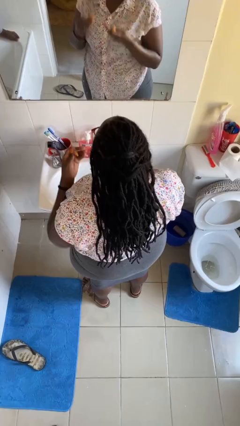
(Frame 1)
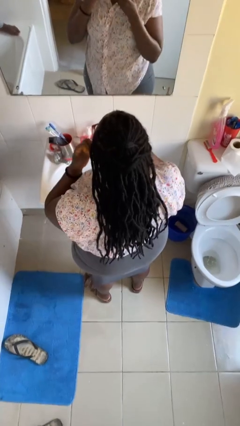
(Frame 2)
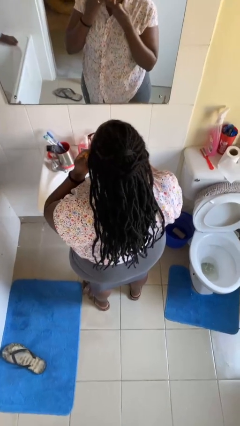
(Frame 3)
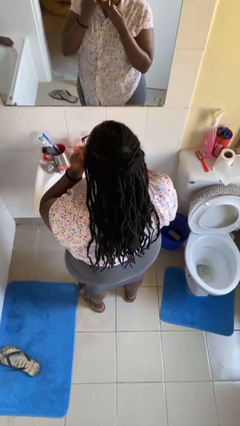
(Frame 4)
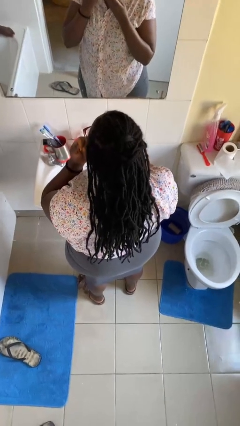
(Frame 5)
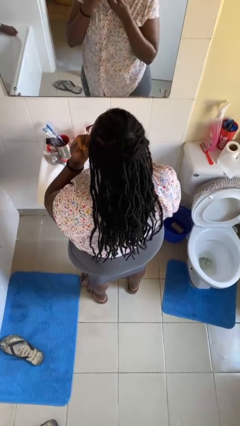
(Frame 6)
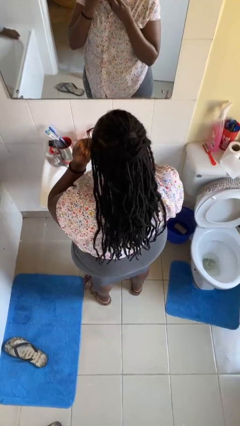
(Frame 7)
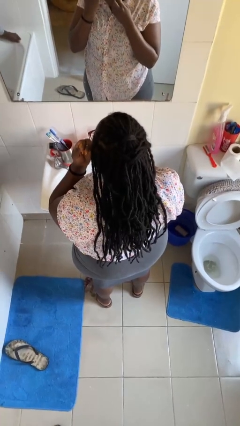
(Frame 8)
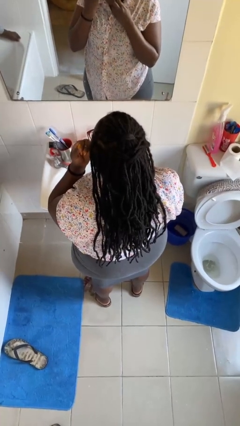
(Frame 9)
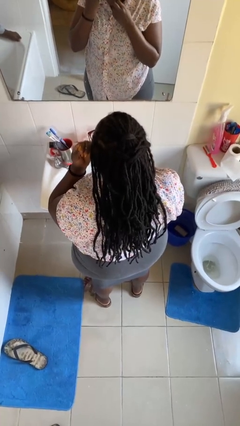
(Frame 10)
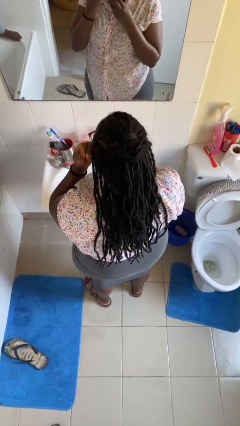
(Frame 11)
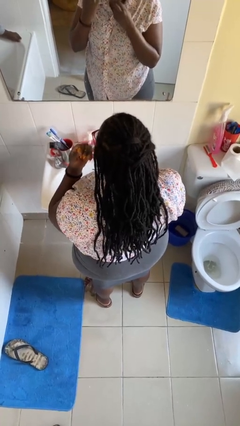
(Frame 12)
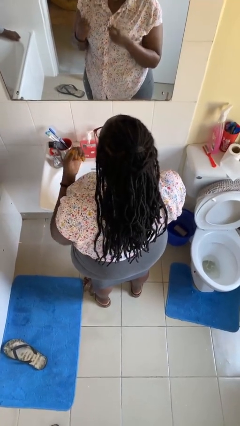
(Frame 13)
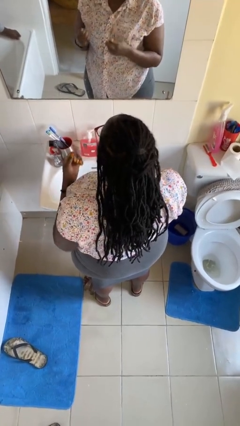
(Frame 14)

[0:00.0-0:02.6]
person flosses

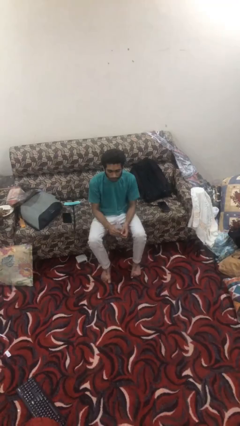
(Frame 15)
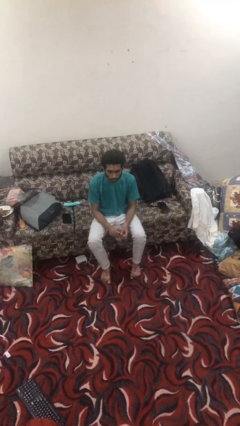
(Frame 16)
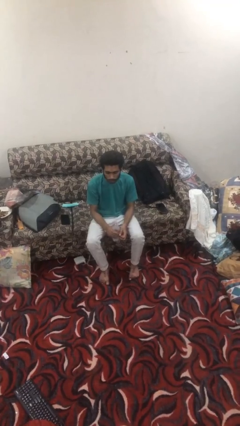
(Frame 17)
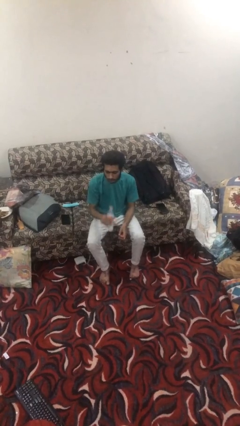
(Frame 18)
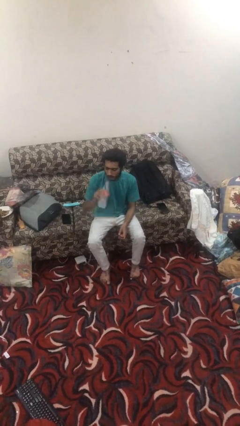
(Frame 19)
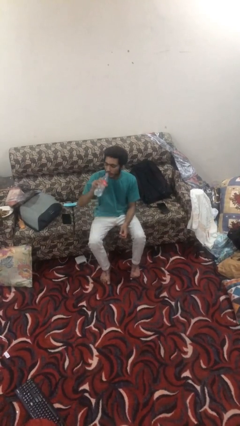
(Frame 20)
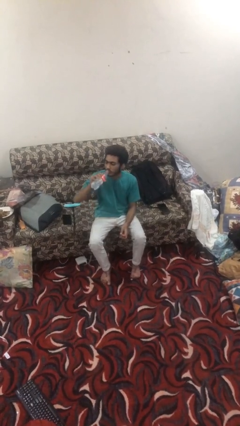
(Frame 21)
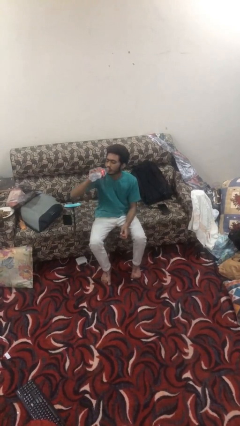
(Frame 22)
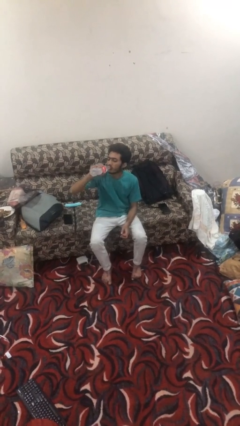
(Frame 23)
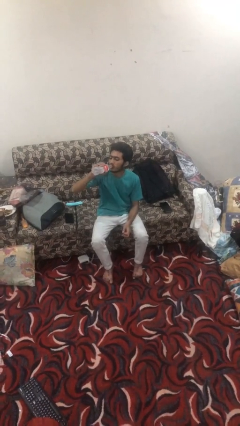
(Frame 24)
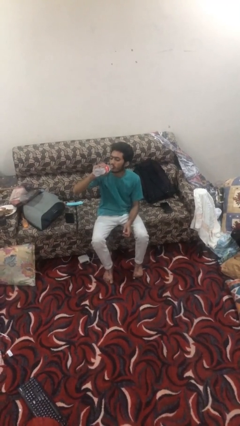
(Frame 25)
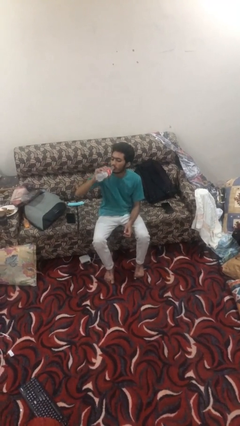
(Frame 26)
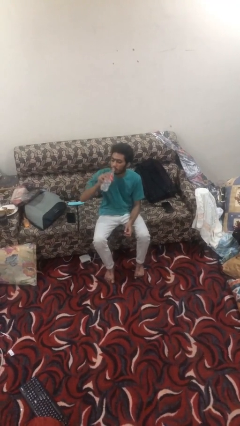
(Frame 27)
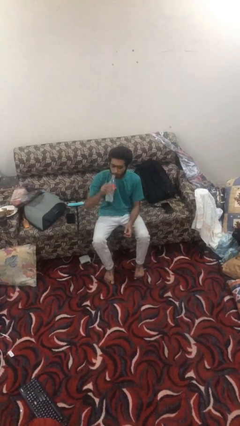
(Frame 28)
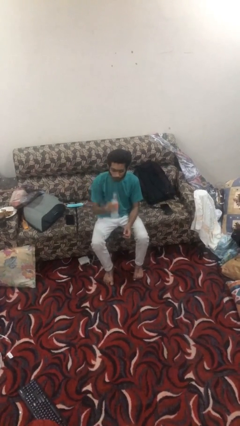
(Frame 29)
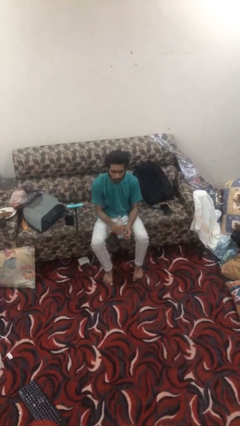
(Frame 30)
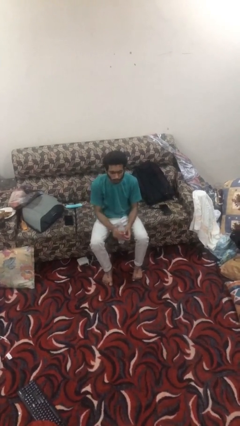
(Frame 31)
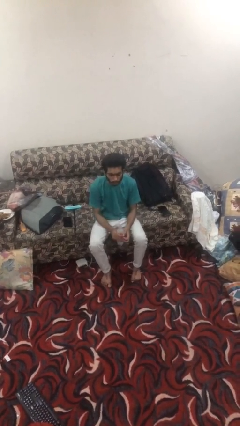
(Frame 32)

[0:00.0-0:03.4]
person drinks from bottle

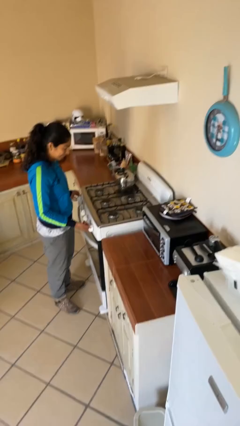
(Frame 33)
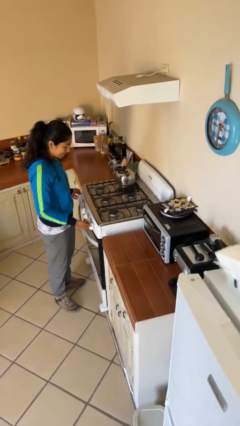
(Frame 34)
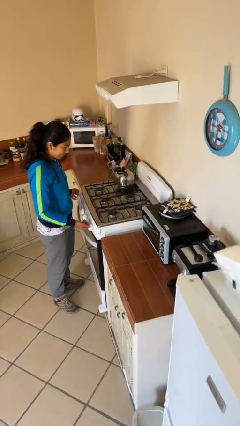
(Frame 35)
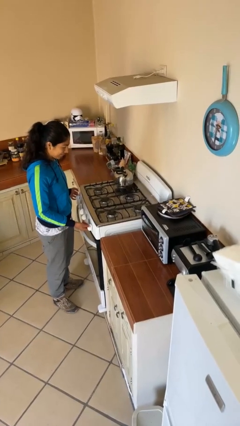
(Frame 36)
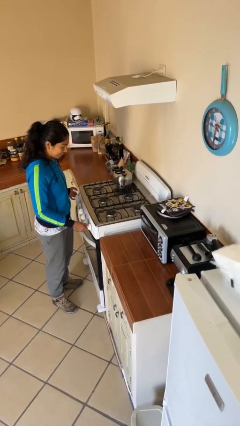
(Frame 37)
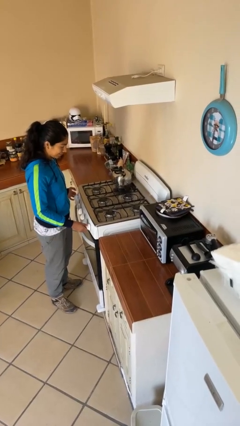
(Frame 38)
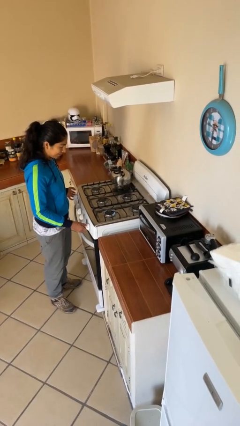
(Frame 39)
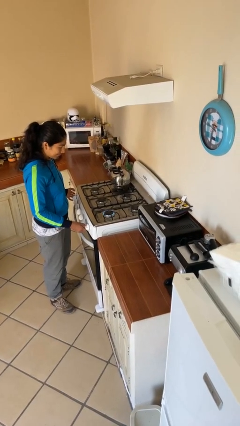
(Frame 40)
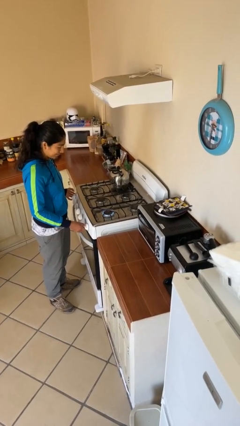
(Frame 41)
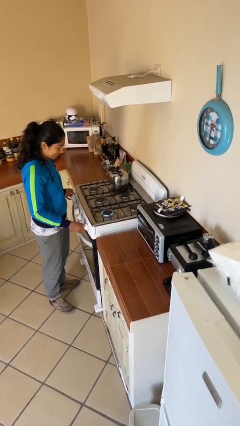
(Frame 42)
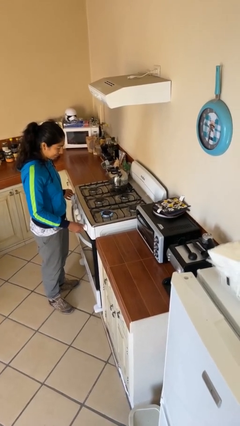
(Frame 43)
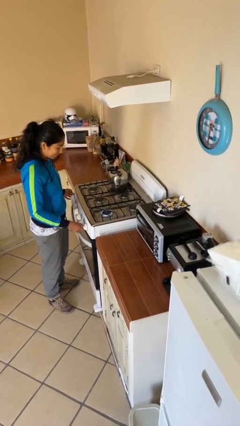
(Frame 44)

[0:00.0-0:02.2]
person turns on stovetop

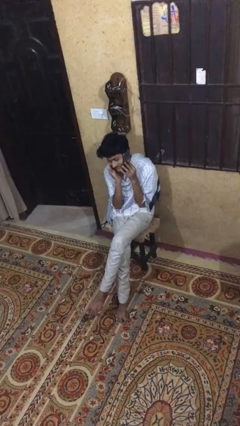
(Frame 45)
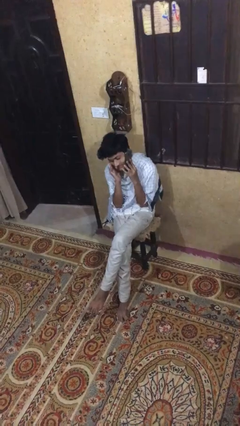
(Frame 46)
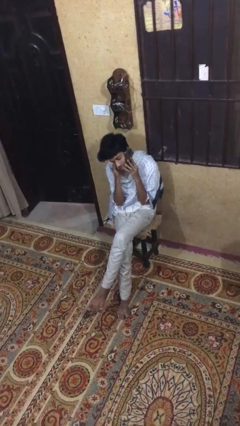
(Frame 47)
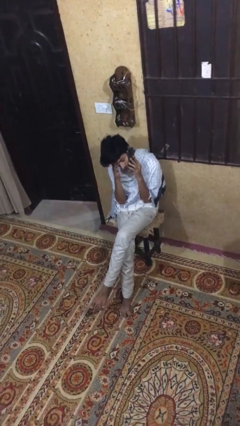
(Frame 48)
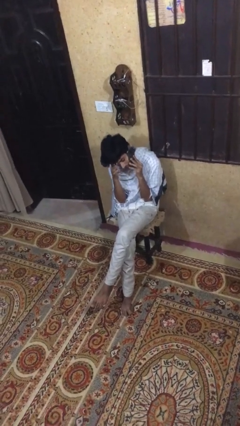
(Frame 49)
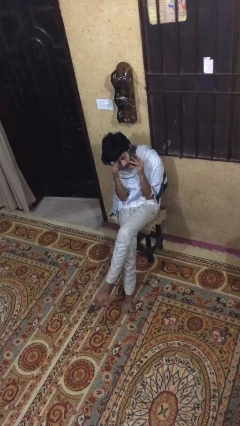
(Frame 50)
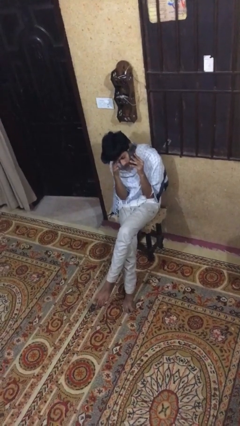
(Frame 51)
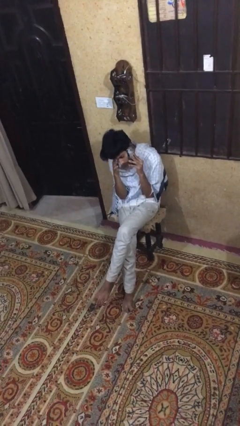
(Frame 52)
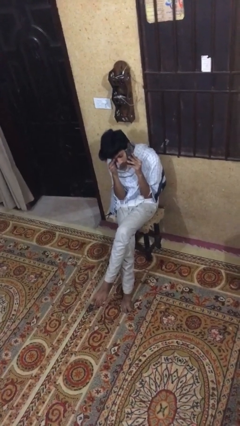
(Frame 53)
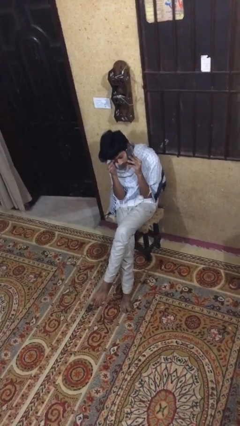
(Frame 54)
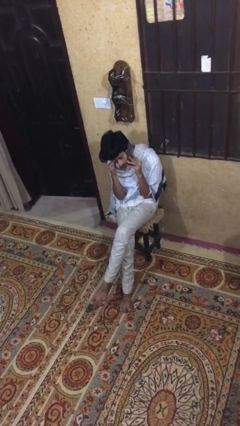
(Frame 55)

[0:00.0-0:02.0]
person talks on phone

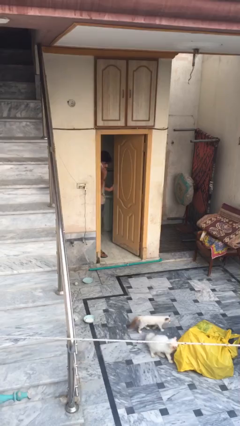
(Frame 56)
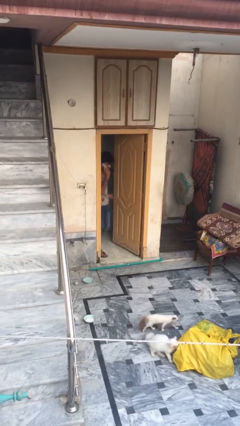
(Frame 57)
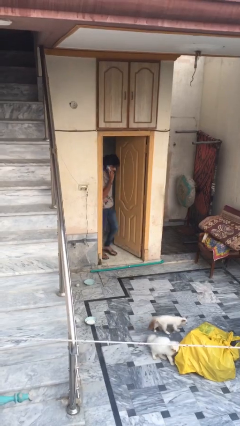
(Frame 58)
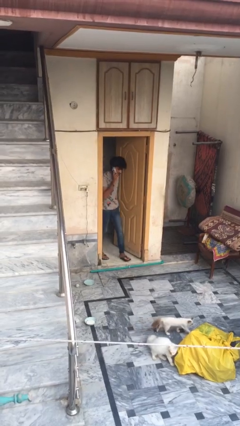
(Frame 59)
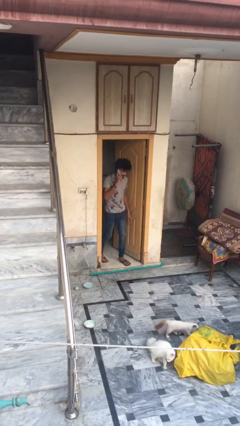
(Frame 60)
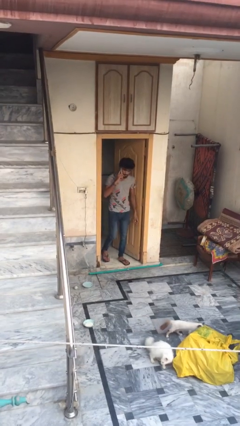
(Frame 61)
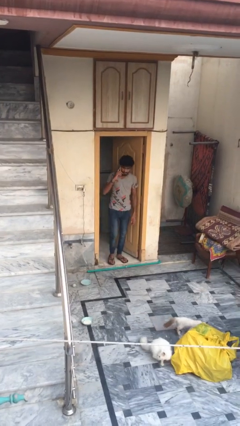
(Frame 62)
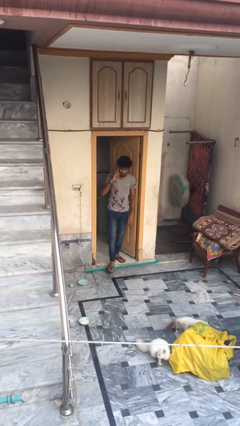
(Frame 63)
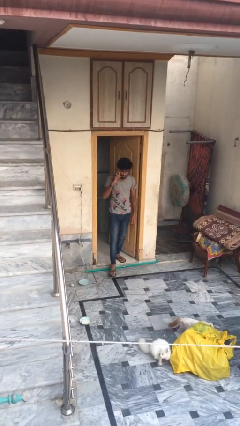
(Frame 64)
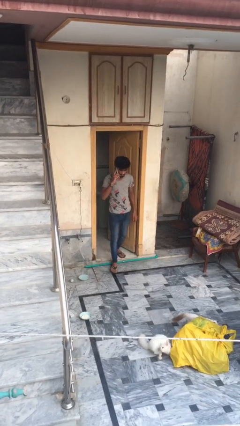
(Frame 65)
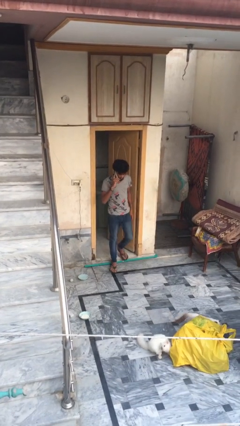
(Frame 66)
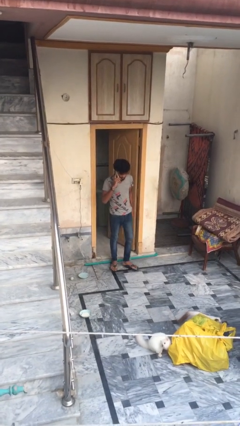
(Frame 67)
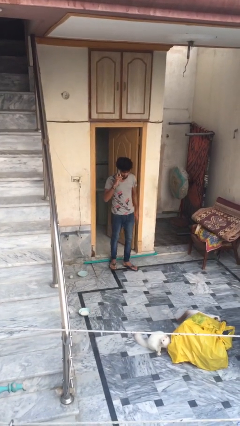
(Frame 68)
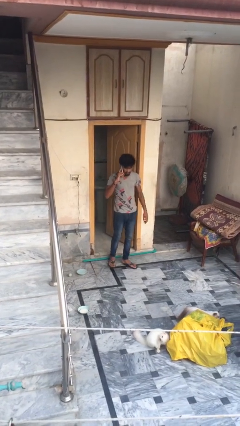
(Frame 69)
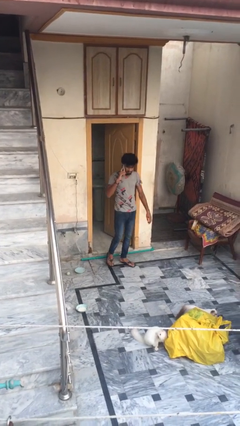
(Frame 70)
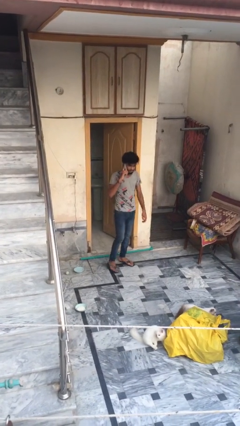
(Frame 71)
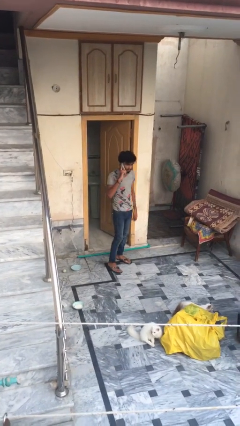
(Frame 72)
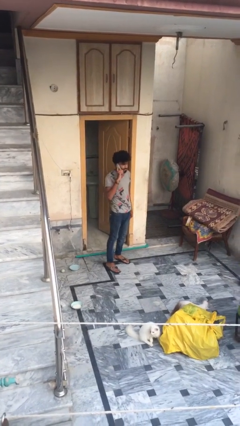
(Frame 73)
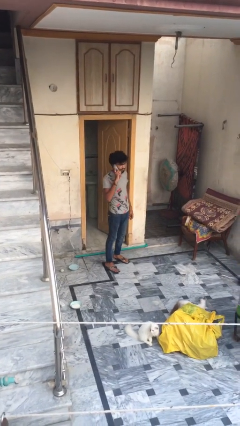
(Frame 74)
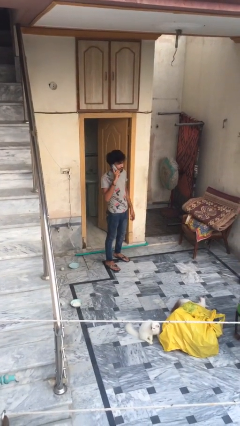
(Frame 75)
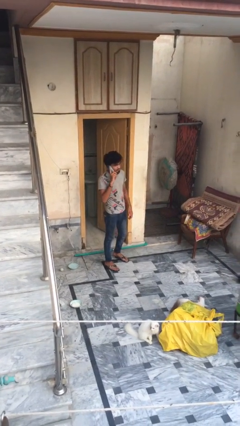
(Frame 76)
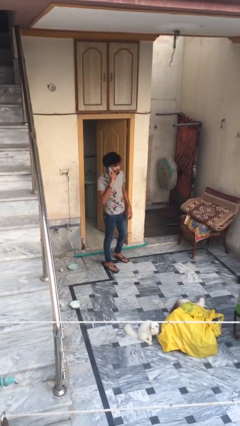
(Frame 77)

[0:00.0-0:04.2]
person enters scene through structure

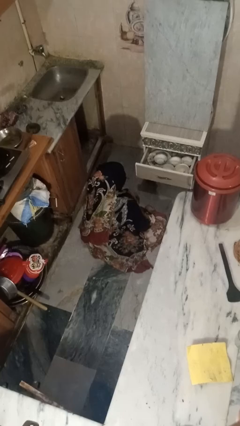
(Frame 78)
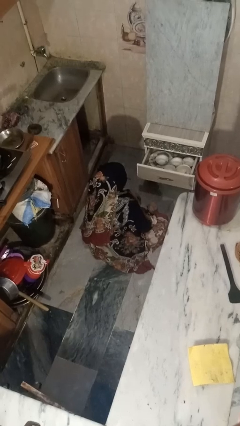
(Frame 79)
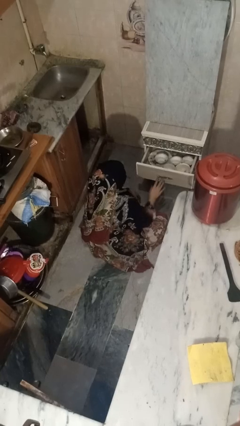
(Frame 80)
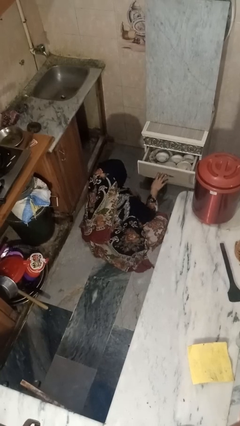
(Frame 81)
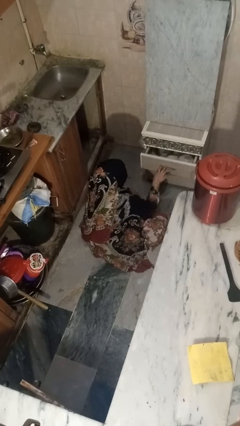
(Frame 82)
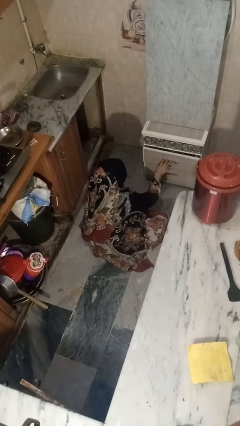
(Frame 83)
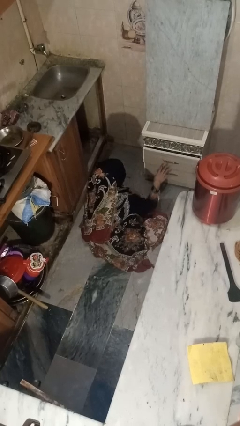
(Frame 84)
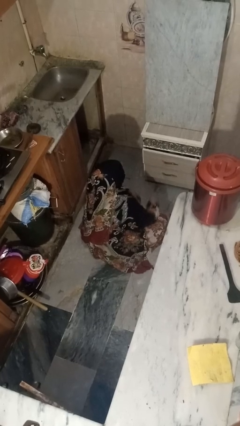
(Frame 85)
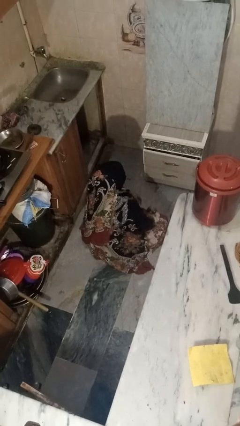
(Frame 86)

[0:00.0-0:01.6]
person closes kitchen drawer

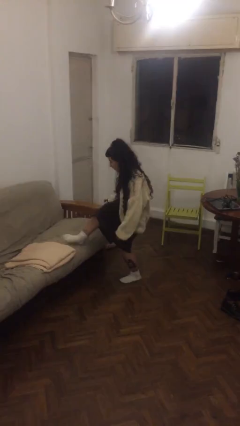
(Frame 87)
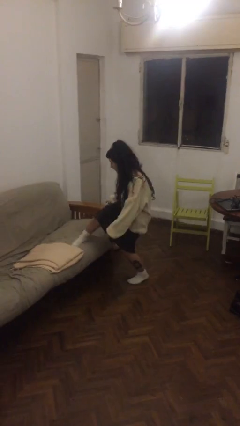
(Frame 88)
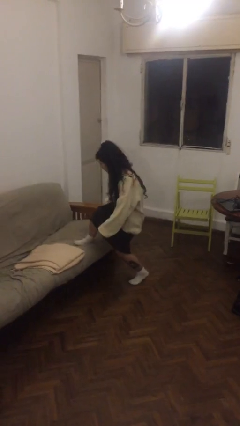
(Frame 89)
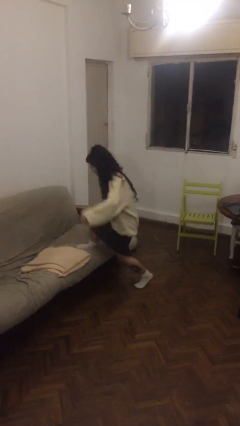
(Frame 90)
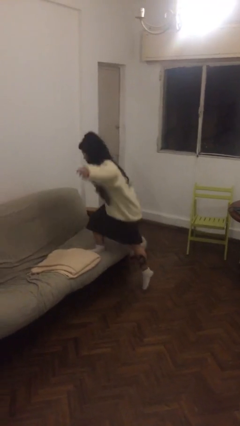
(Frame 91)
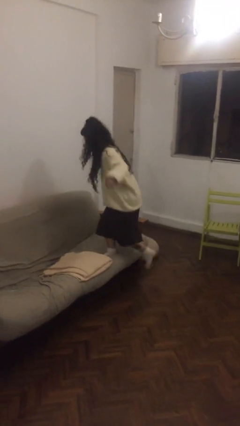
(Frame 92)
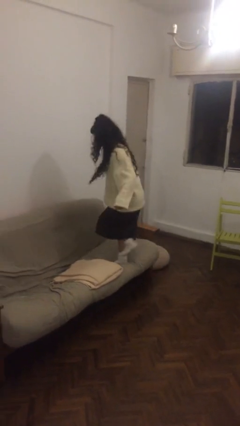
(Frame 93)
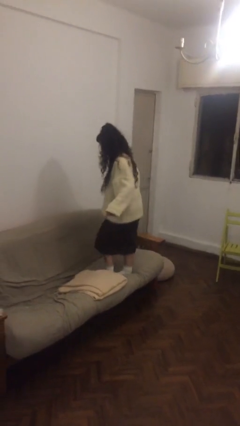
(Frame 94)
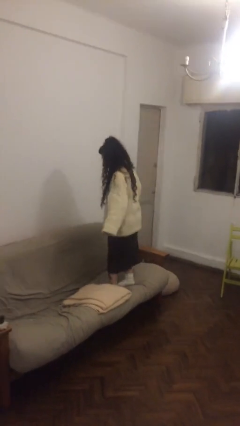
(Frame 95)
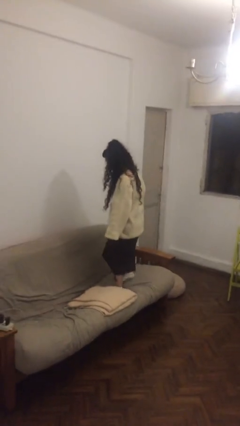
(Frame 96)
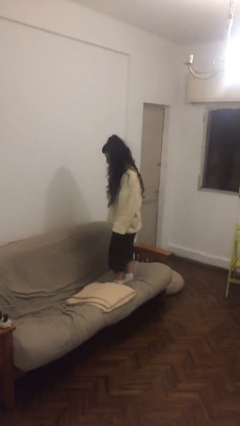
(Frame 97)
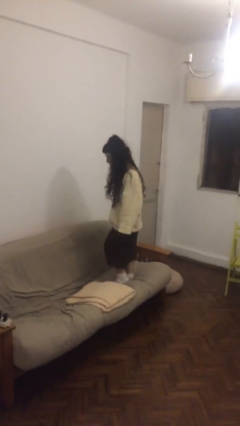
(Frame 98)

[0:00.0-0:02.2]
person climbs on couch
